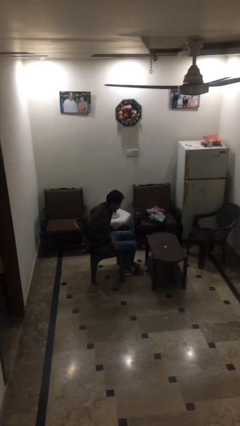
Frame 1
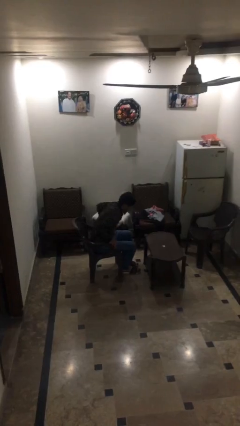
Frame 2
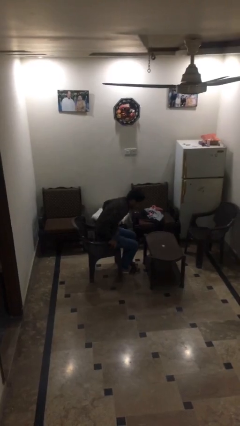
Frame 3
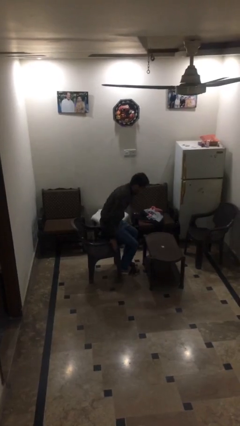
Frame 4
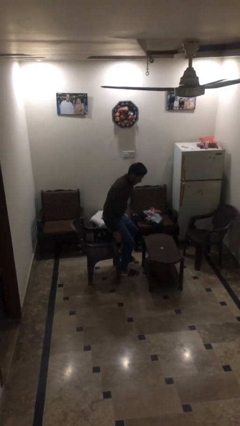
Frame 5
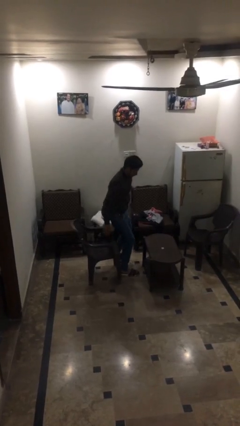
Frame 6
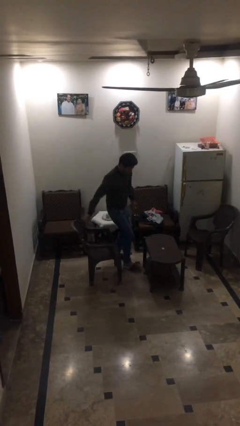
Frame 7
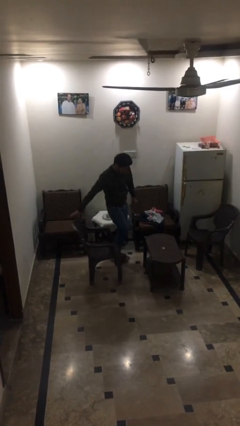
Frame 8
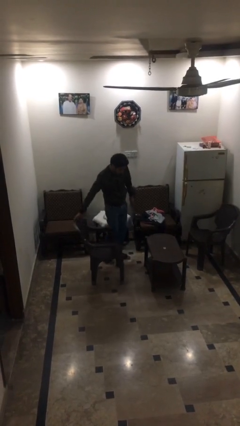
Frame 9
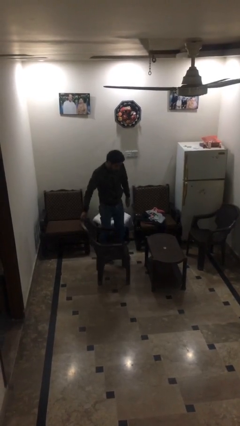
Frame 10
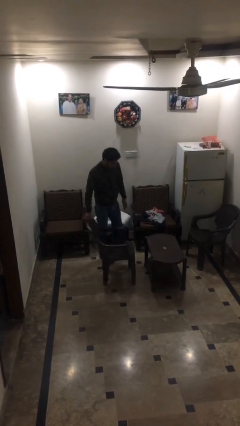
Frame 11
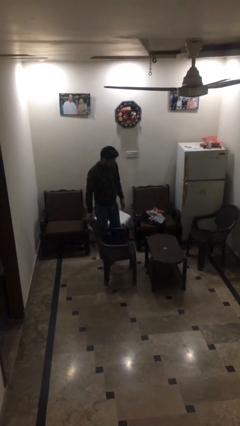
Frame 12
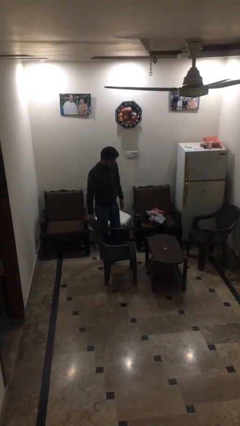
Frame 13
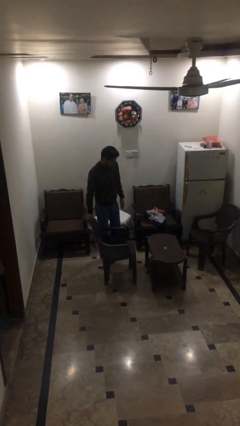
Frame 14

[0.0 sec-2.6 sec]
person stands up

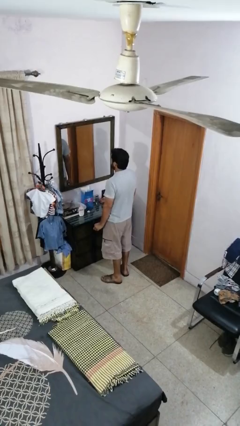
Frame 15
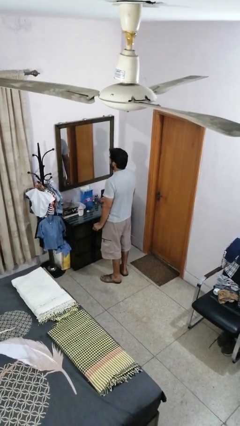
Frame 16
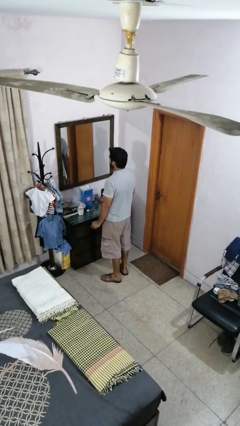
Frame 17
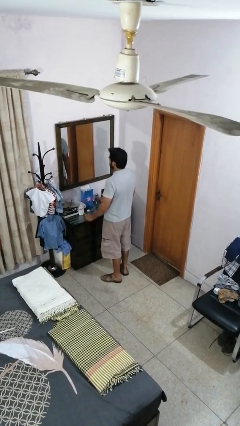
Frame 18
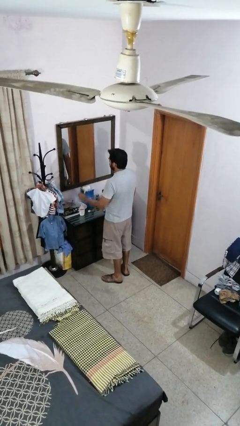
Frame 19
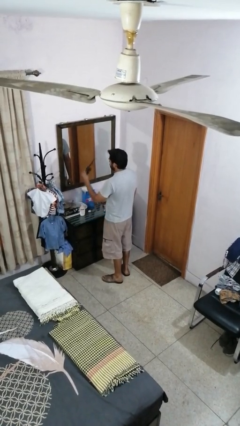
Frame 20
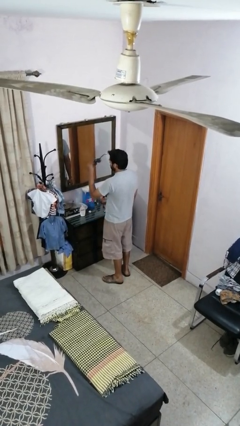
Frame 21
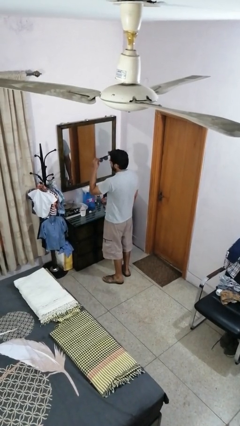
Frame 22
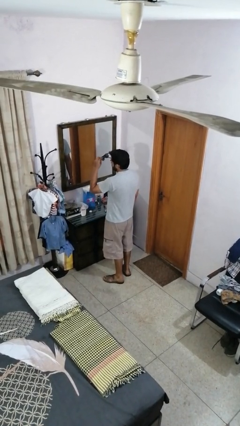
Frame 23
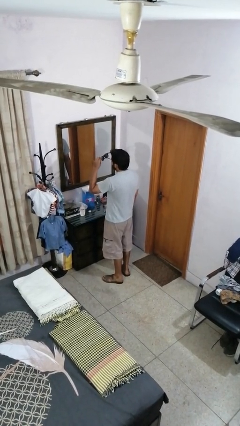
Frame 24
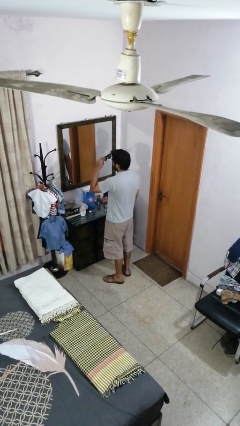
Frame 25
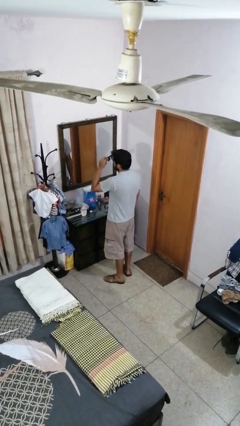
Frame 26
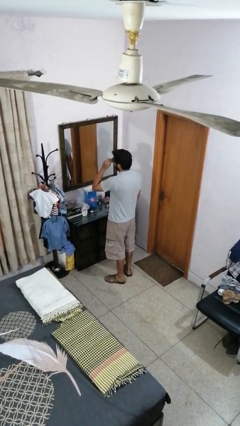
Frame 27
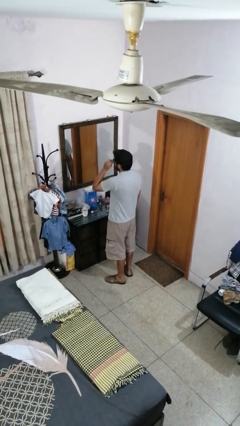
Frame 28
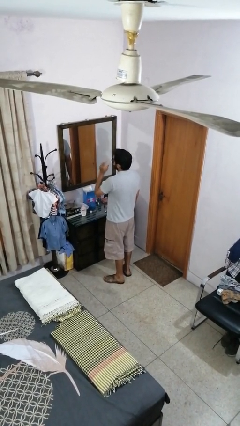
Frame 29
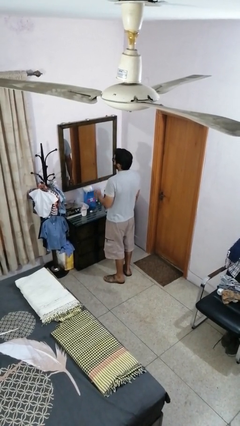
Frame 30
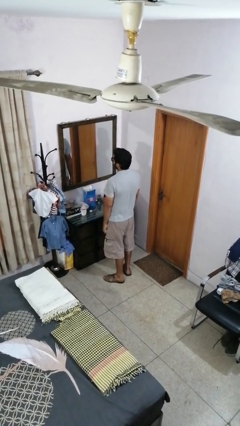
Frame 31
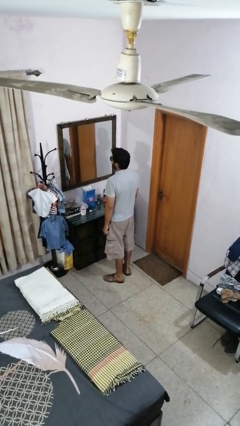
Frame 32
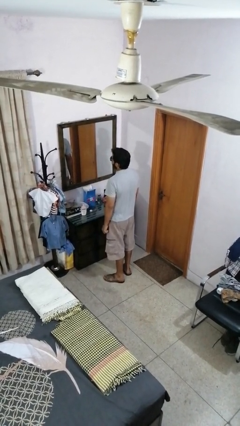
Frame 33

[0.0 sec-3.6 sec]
person puts on sunglasses

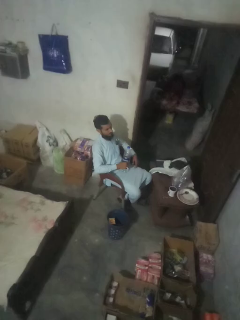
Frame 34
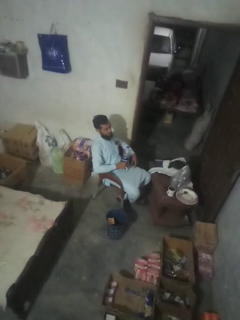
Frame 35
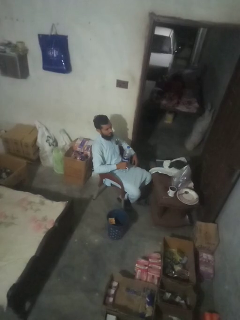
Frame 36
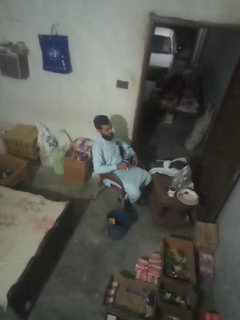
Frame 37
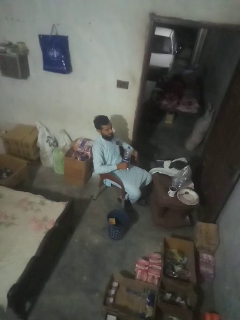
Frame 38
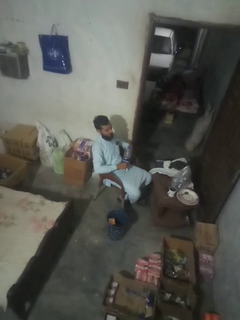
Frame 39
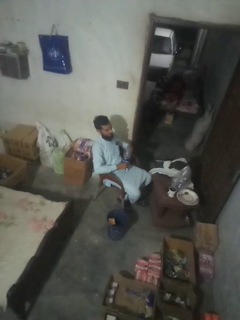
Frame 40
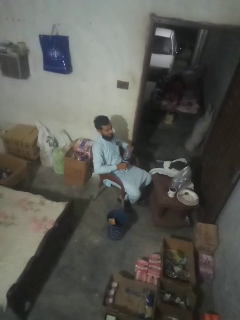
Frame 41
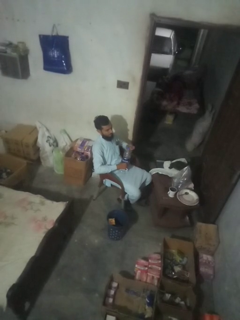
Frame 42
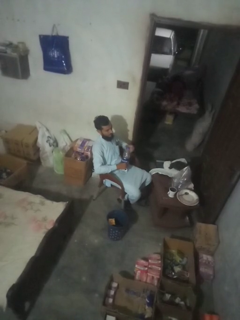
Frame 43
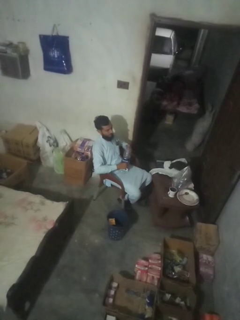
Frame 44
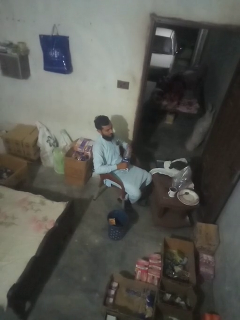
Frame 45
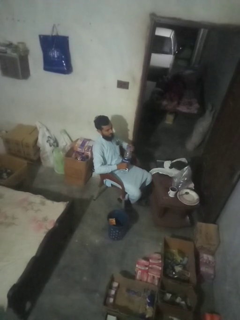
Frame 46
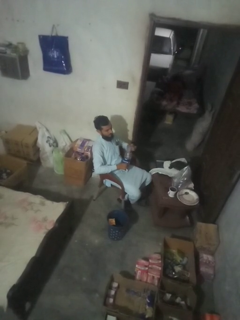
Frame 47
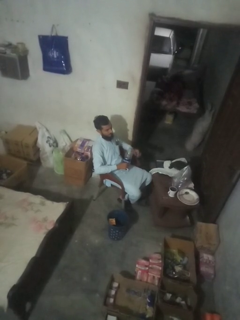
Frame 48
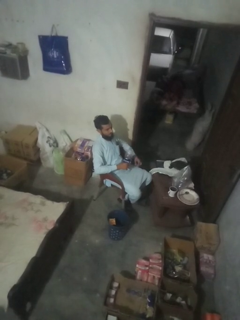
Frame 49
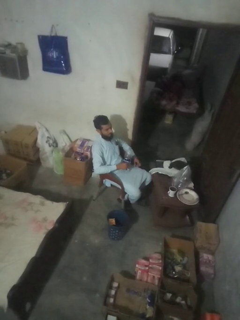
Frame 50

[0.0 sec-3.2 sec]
person unscrews lid from bottle

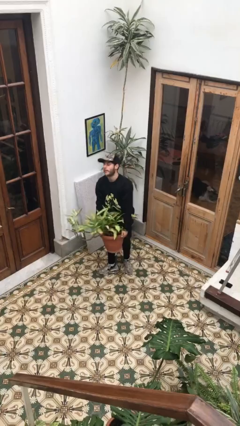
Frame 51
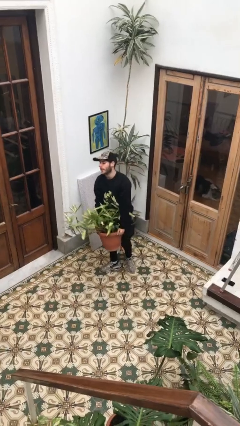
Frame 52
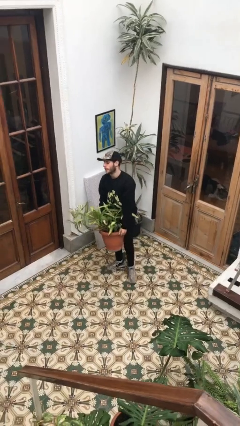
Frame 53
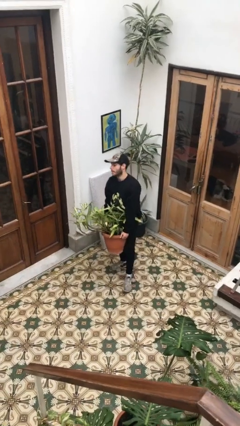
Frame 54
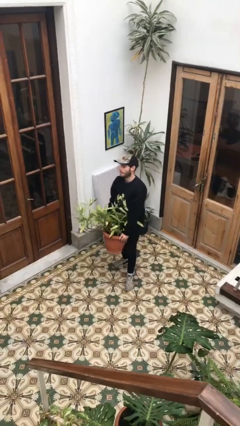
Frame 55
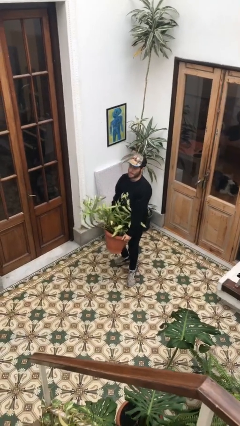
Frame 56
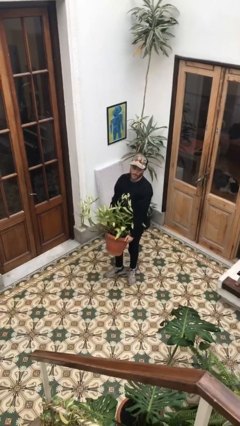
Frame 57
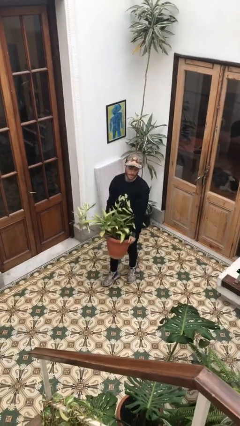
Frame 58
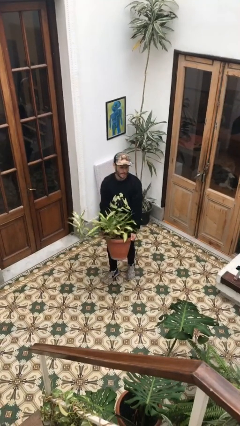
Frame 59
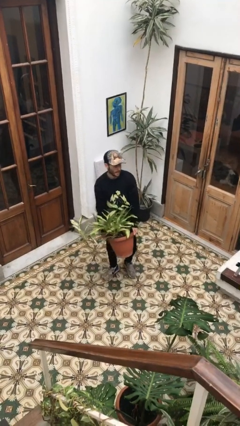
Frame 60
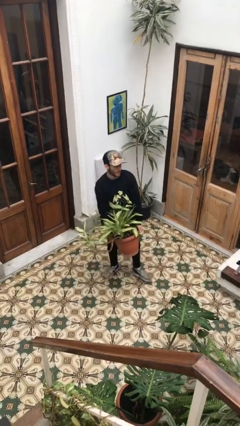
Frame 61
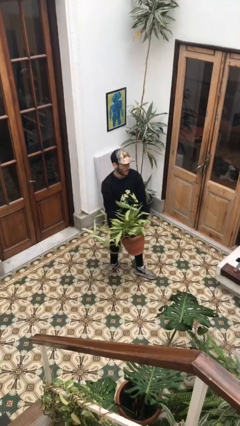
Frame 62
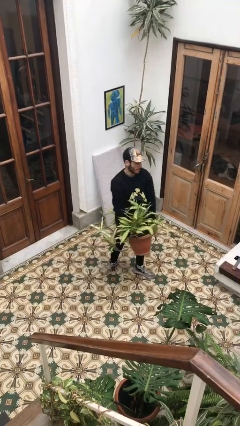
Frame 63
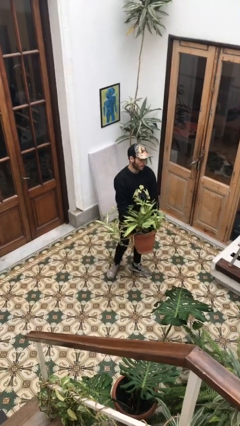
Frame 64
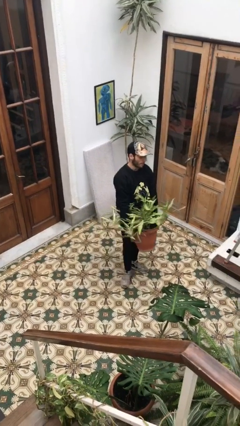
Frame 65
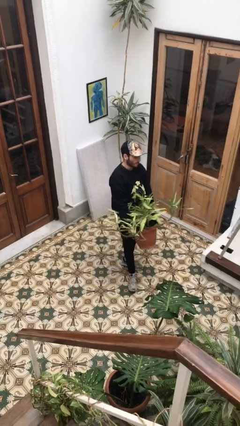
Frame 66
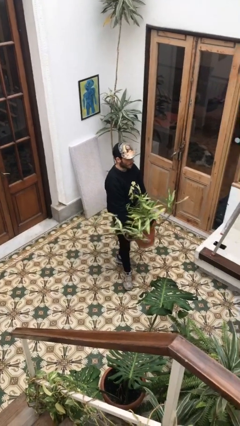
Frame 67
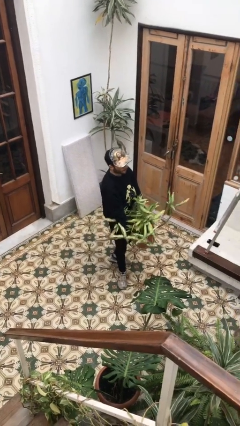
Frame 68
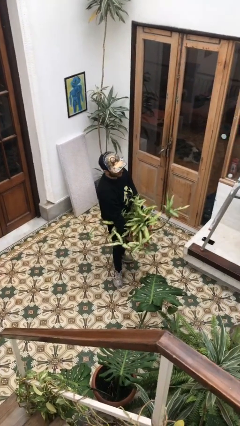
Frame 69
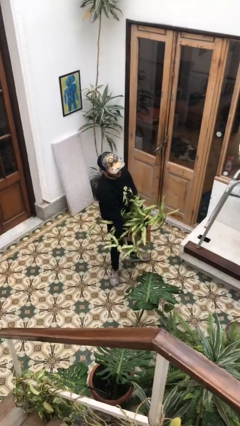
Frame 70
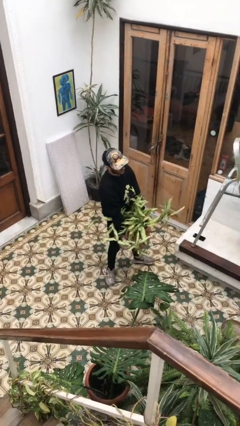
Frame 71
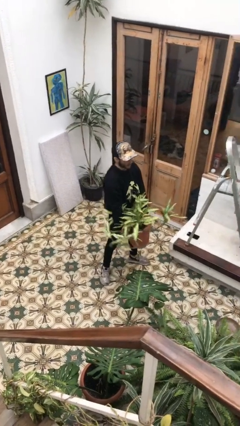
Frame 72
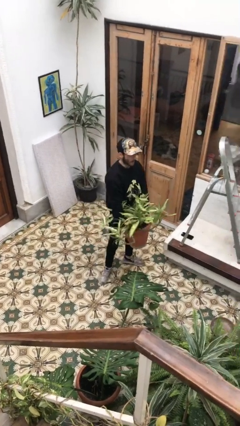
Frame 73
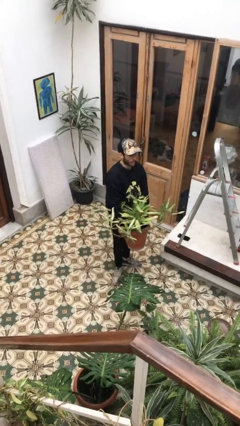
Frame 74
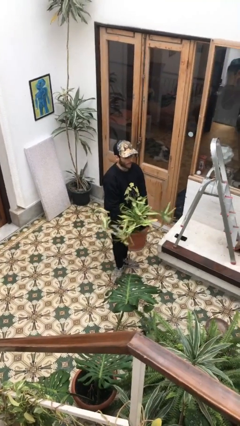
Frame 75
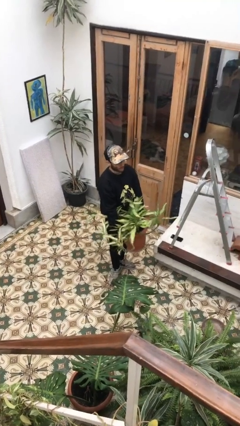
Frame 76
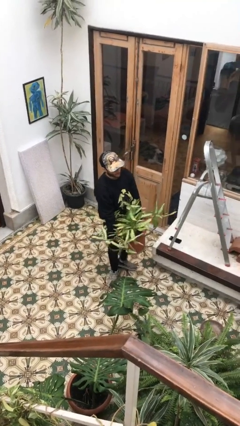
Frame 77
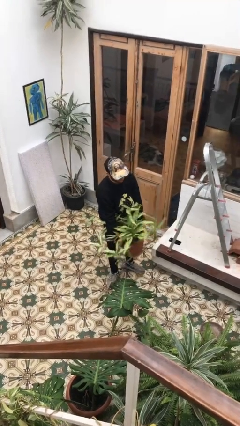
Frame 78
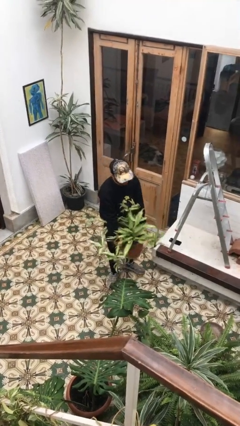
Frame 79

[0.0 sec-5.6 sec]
person carries heavy object

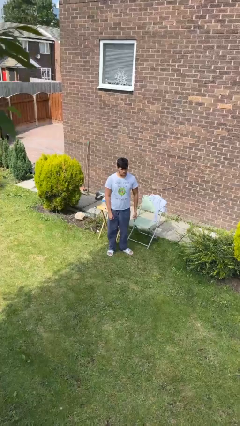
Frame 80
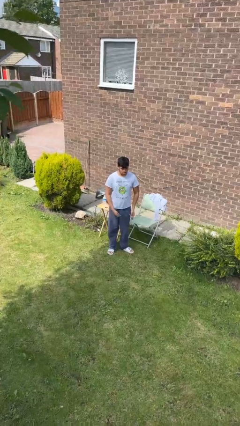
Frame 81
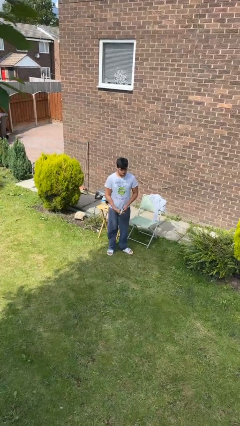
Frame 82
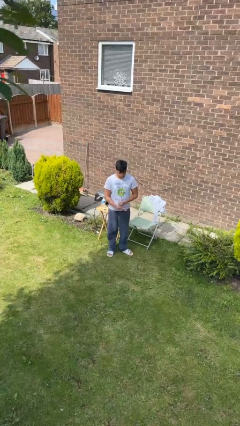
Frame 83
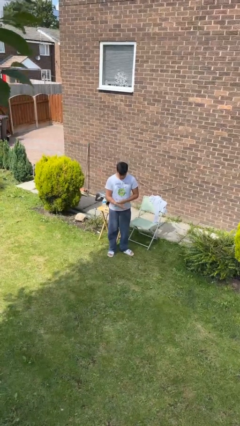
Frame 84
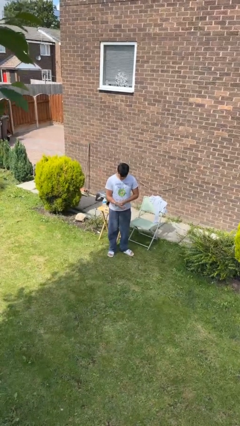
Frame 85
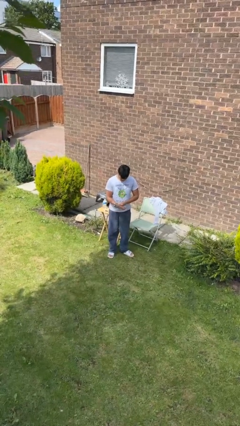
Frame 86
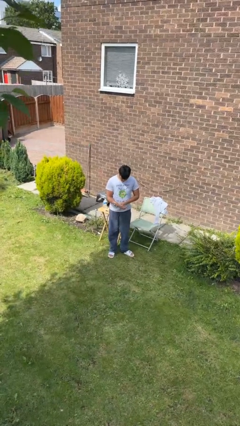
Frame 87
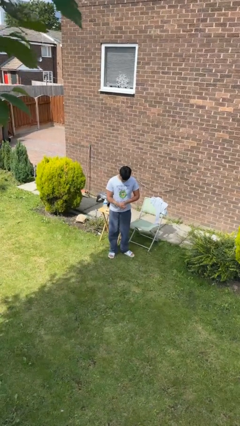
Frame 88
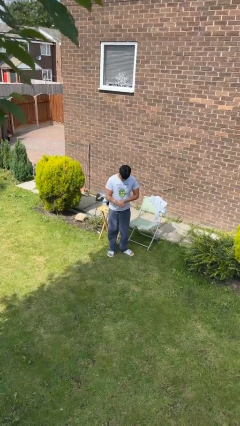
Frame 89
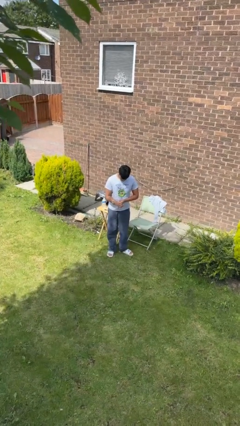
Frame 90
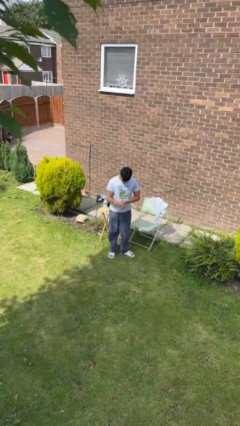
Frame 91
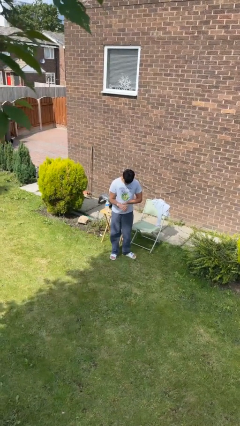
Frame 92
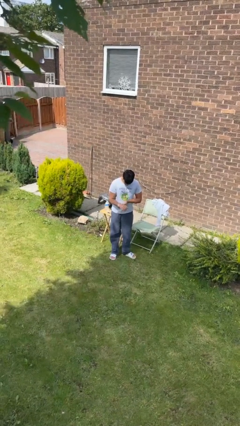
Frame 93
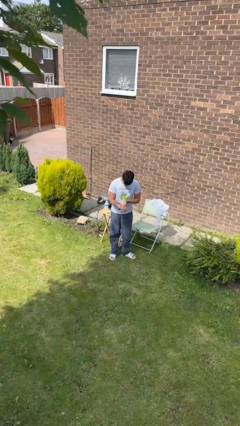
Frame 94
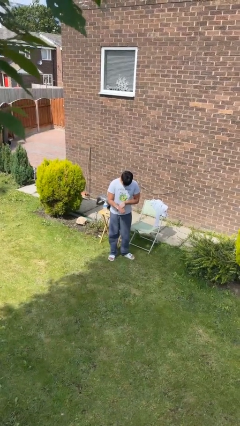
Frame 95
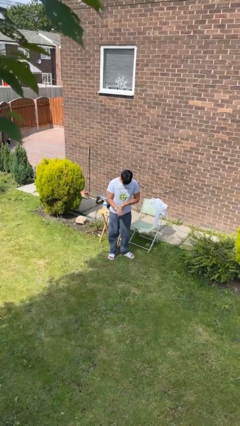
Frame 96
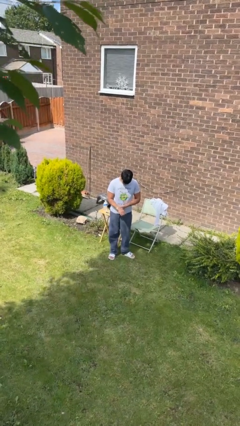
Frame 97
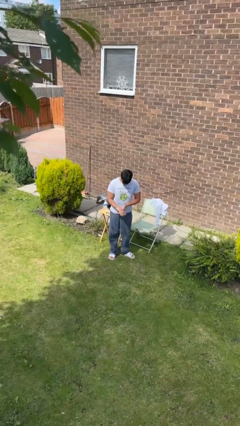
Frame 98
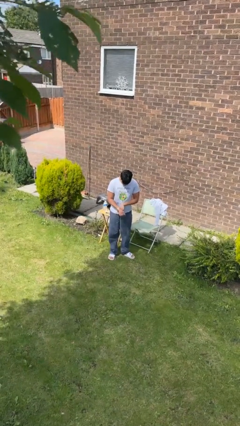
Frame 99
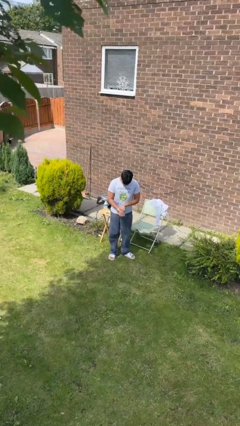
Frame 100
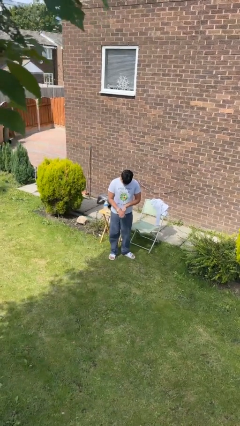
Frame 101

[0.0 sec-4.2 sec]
person puts on wristwatch
